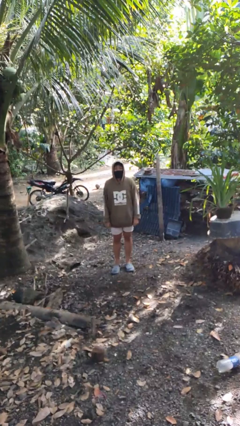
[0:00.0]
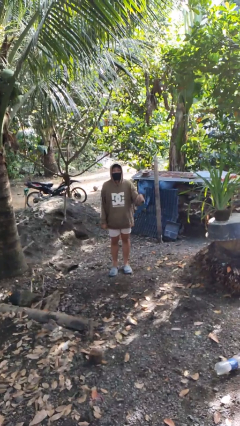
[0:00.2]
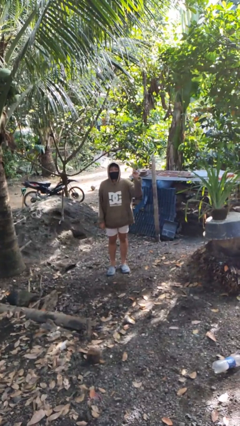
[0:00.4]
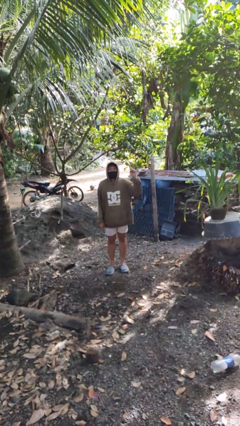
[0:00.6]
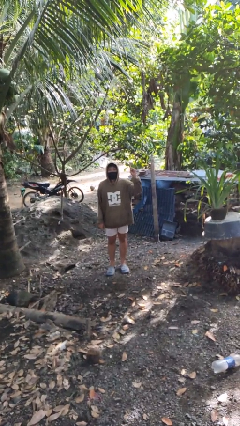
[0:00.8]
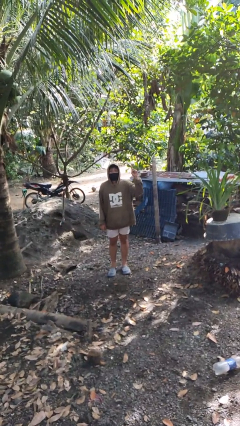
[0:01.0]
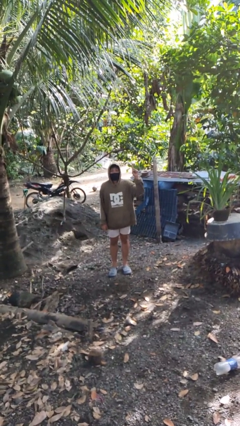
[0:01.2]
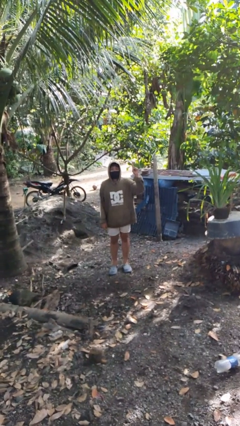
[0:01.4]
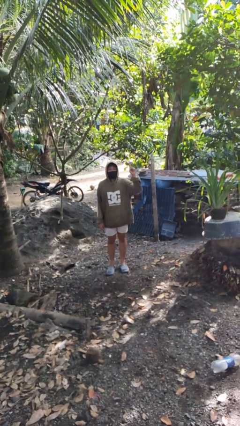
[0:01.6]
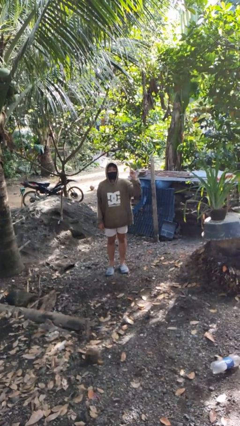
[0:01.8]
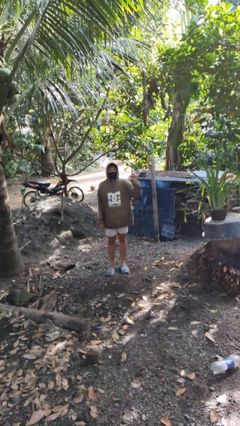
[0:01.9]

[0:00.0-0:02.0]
person gestures number one

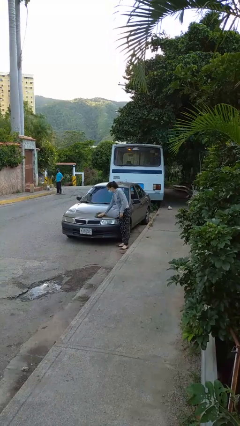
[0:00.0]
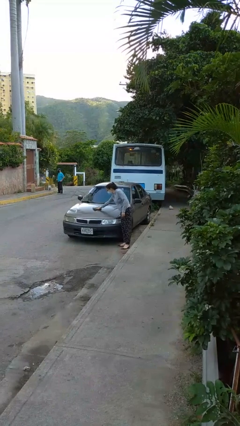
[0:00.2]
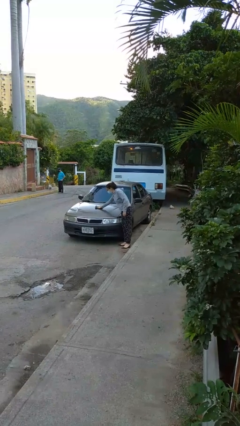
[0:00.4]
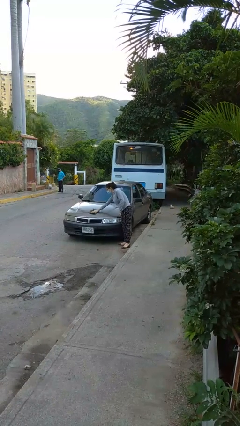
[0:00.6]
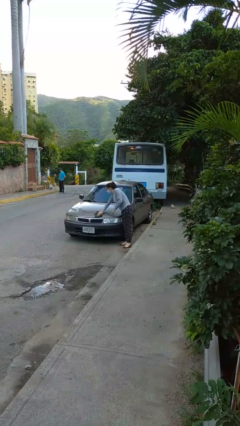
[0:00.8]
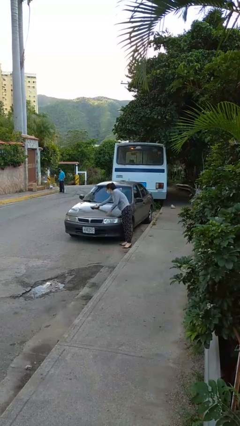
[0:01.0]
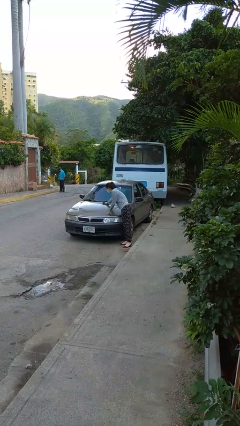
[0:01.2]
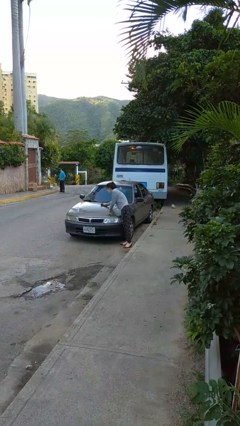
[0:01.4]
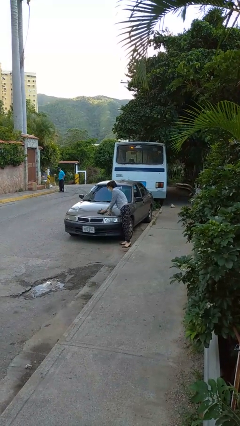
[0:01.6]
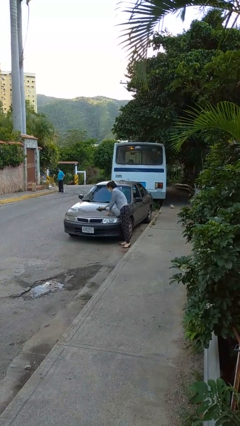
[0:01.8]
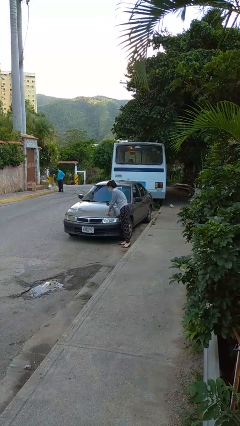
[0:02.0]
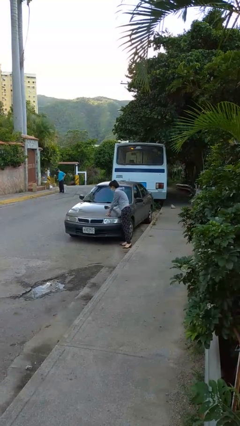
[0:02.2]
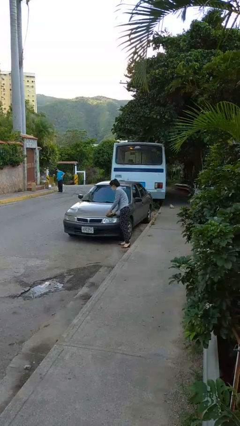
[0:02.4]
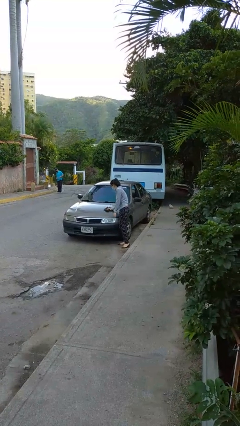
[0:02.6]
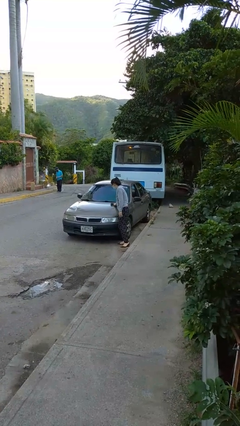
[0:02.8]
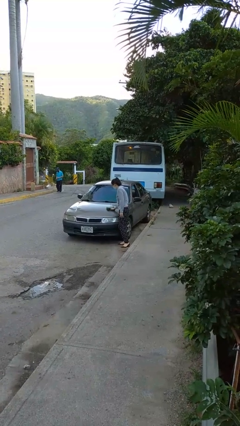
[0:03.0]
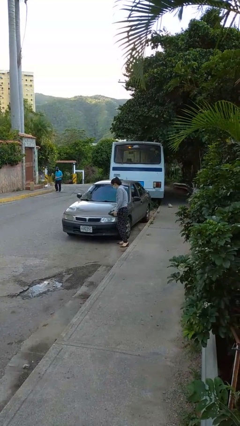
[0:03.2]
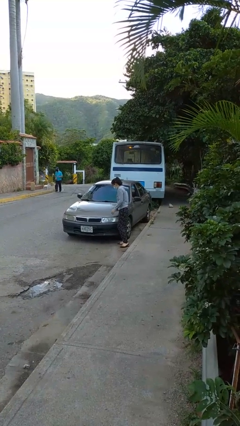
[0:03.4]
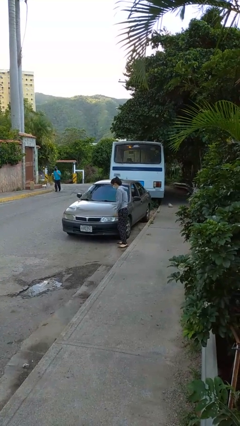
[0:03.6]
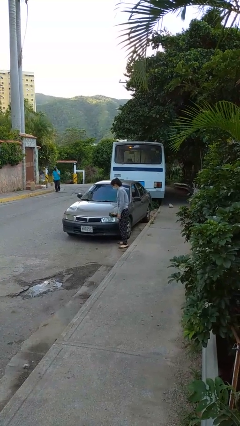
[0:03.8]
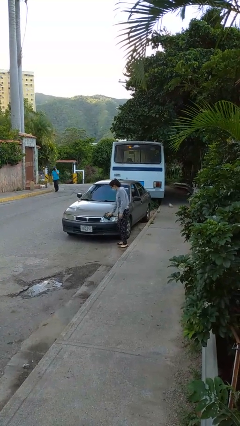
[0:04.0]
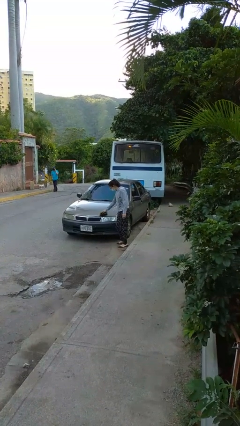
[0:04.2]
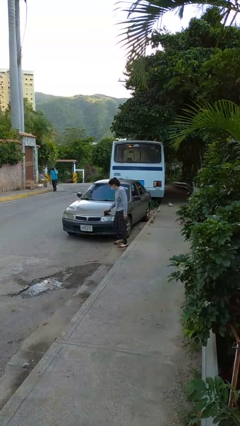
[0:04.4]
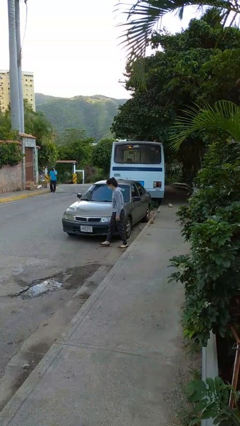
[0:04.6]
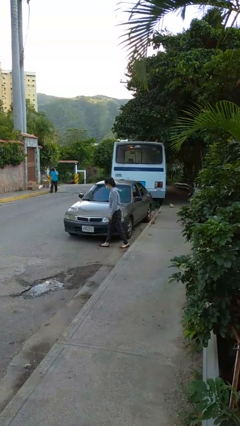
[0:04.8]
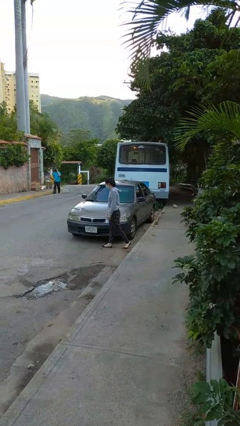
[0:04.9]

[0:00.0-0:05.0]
person polishes car with rag

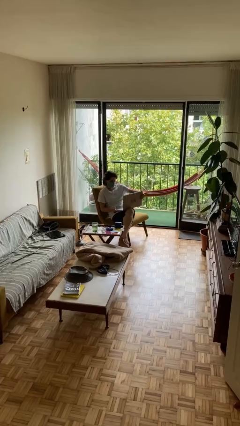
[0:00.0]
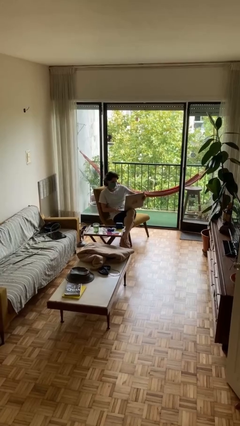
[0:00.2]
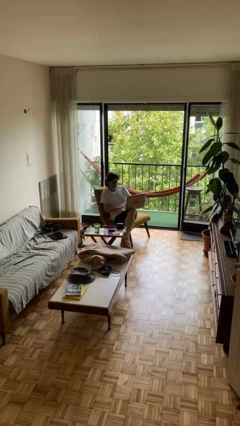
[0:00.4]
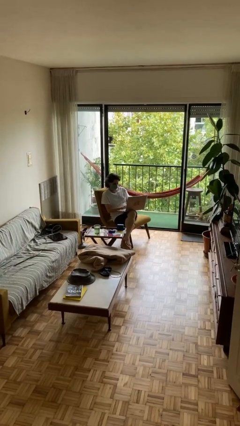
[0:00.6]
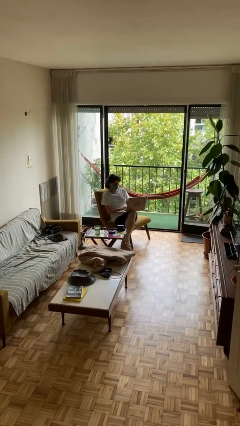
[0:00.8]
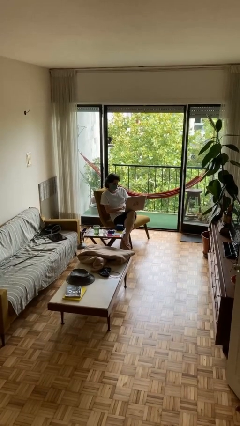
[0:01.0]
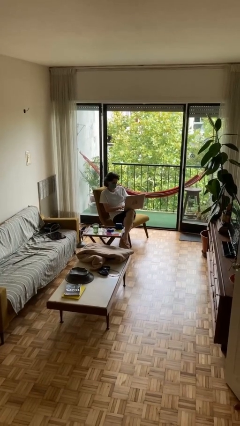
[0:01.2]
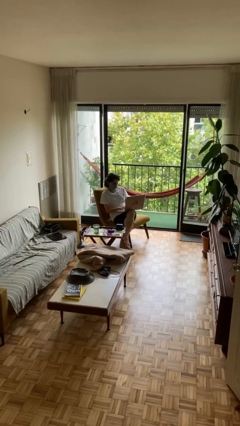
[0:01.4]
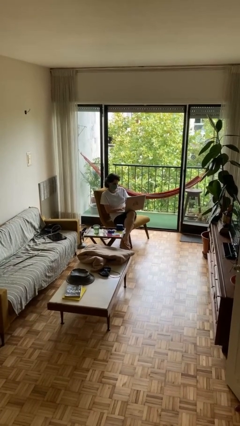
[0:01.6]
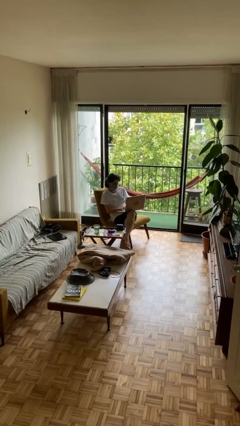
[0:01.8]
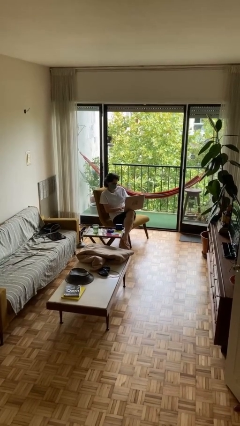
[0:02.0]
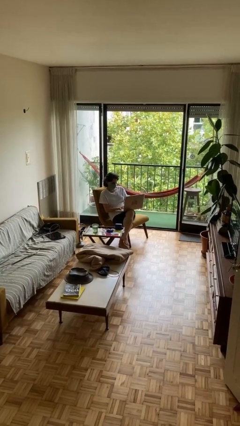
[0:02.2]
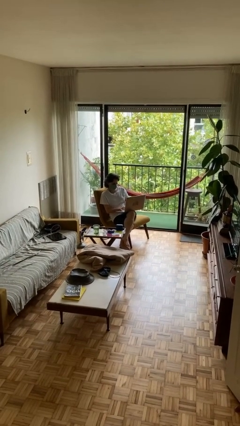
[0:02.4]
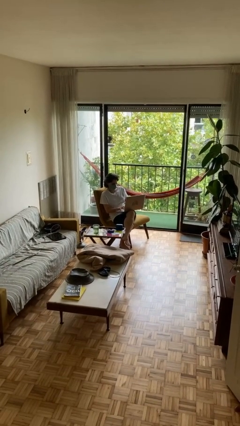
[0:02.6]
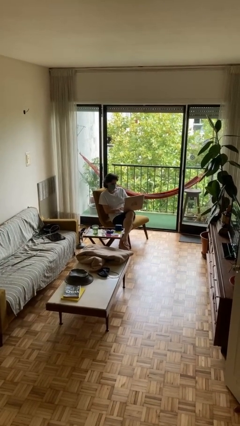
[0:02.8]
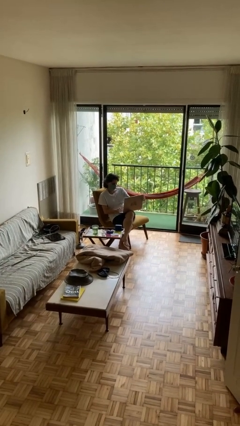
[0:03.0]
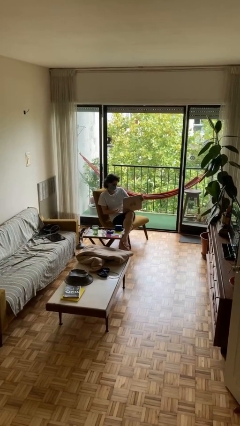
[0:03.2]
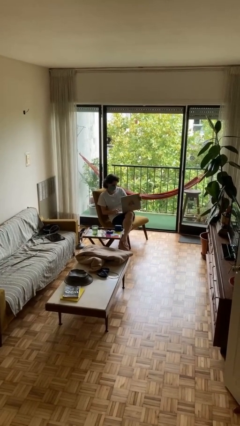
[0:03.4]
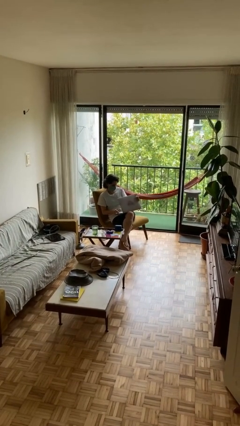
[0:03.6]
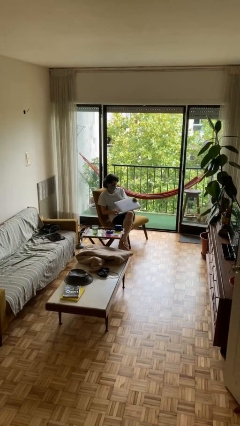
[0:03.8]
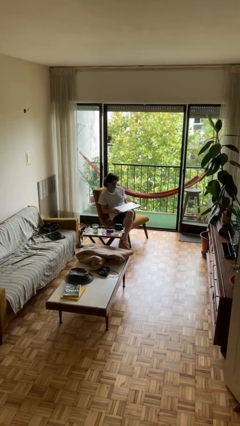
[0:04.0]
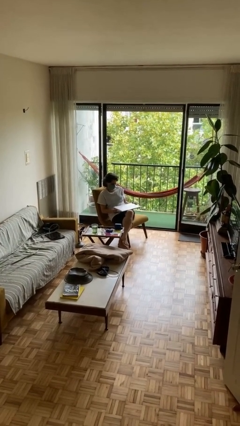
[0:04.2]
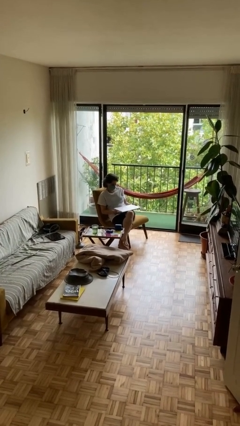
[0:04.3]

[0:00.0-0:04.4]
person interacts with laptop

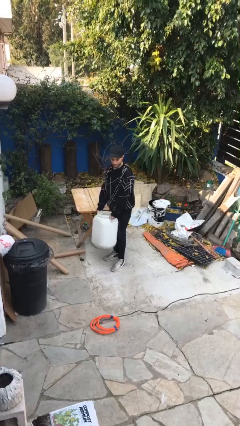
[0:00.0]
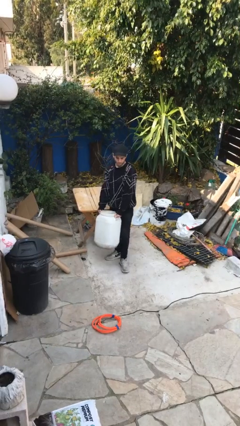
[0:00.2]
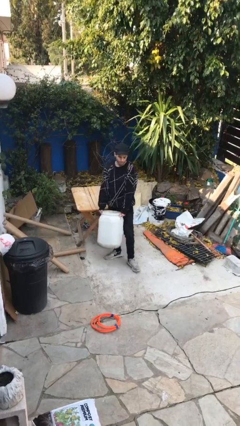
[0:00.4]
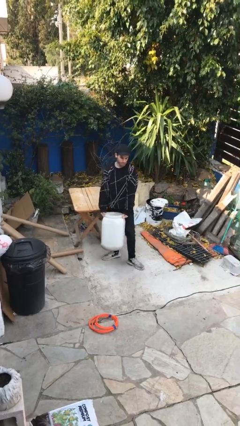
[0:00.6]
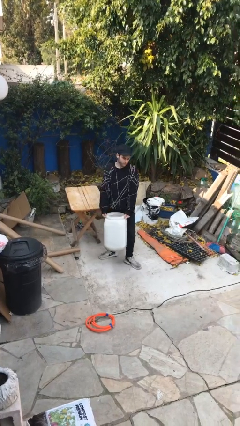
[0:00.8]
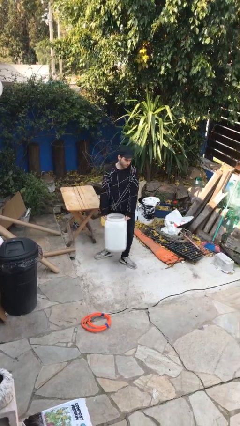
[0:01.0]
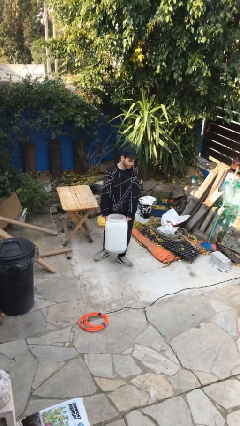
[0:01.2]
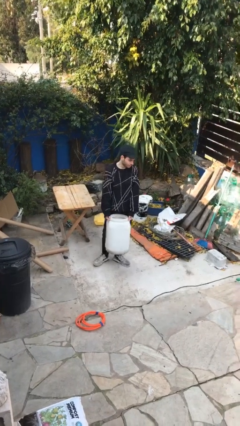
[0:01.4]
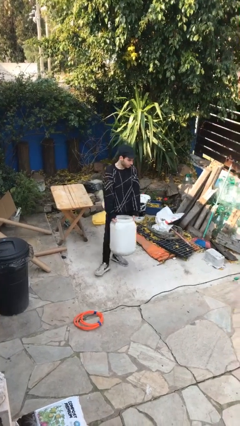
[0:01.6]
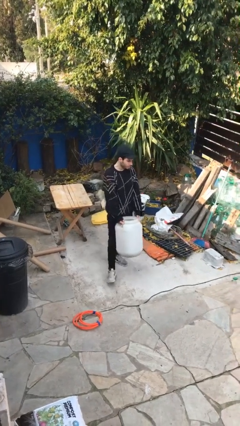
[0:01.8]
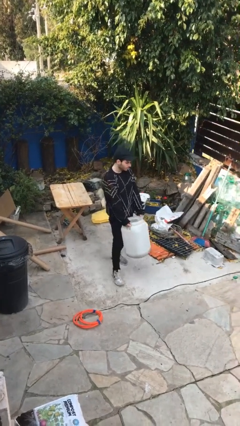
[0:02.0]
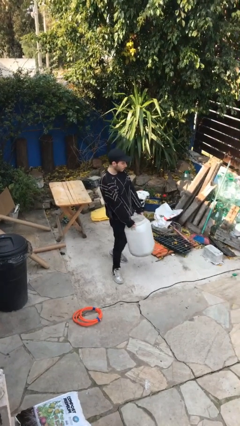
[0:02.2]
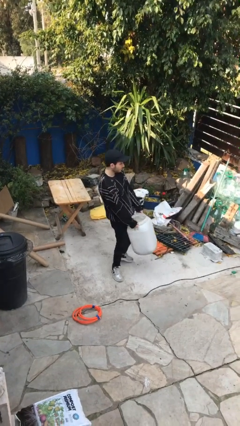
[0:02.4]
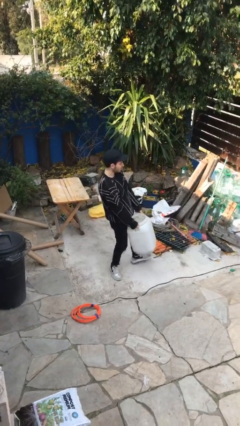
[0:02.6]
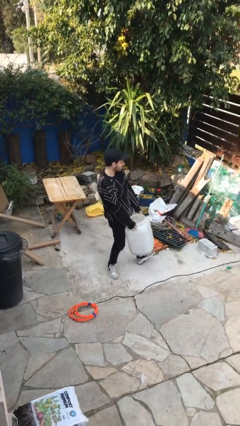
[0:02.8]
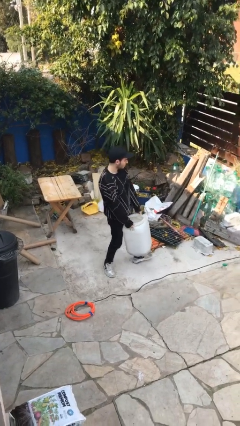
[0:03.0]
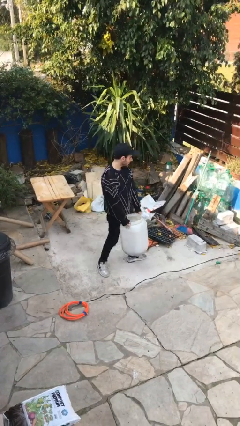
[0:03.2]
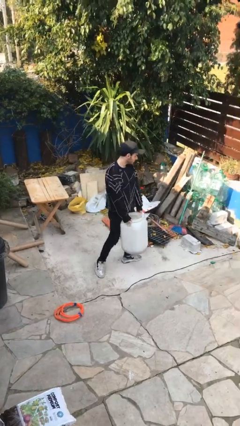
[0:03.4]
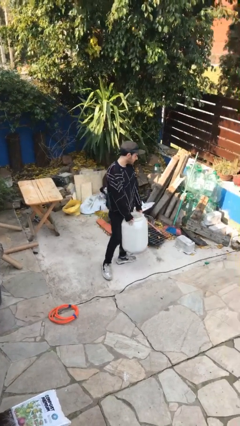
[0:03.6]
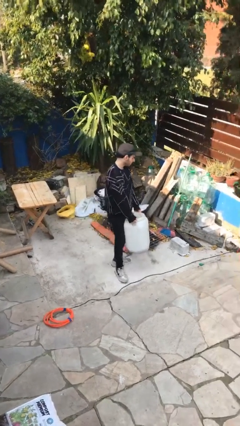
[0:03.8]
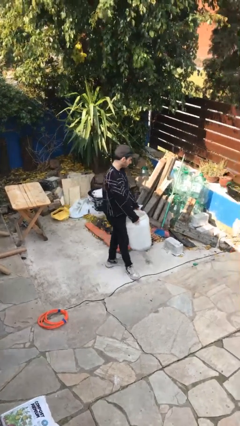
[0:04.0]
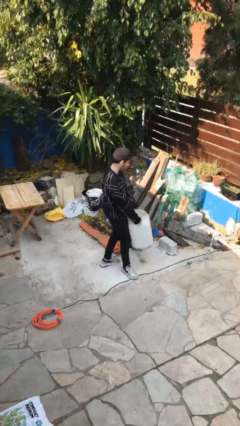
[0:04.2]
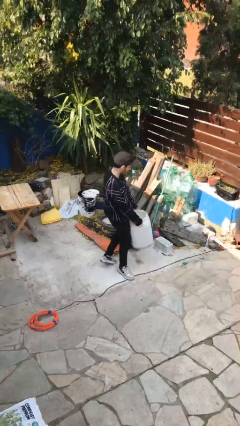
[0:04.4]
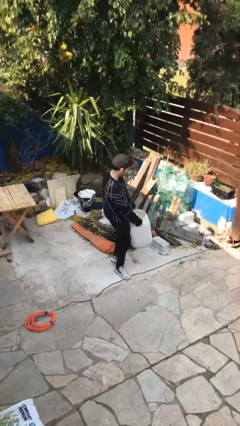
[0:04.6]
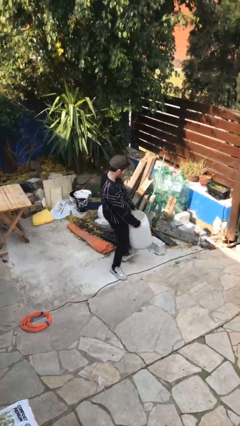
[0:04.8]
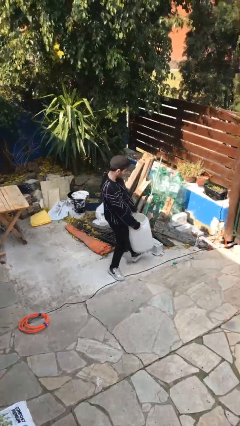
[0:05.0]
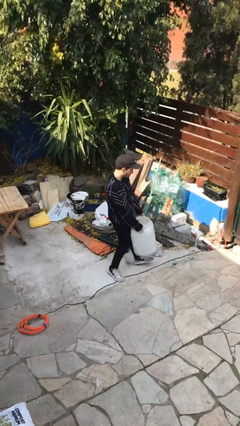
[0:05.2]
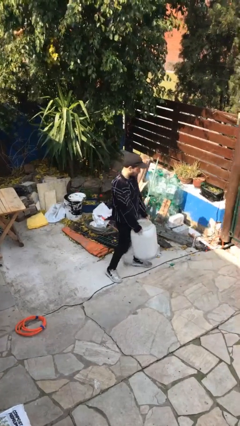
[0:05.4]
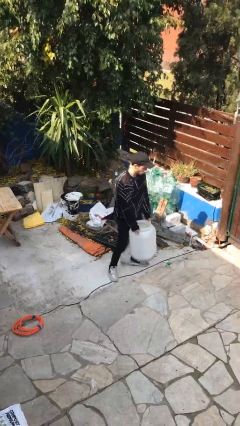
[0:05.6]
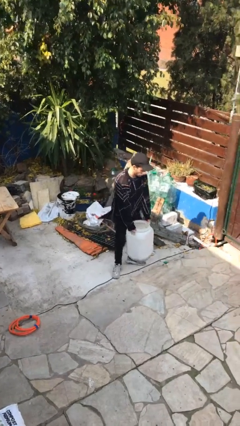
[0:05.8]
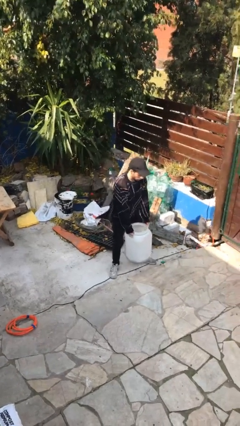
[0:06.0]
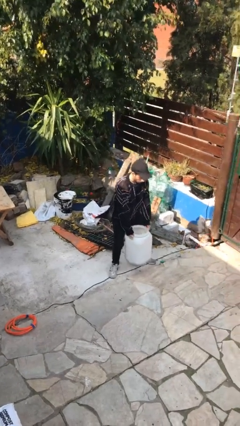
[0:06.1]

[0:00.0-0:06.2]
person carries heavy object

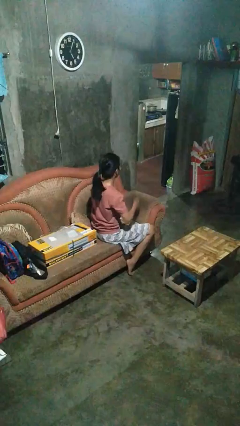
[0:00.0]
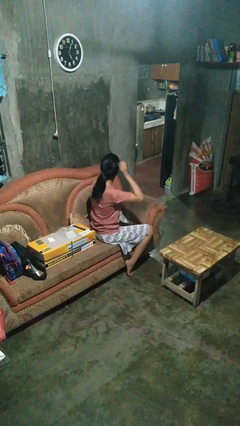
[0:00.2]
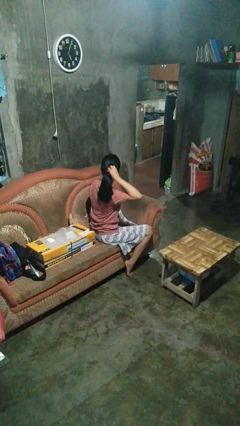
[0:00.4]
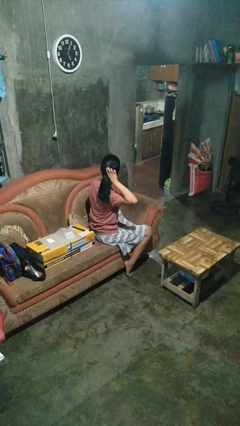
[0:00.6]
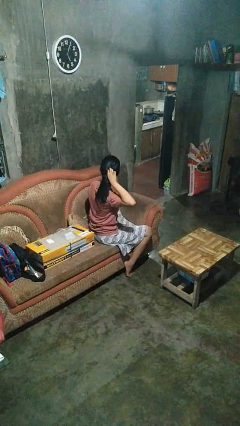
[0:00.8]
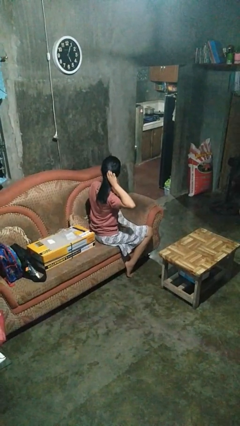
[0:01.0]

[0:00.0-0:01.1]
person takes off hairtie
